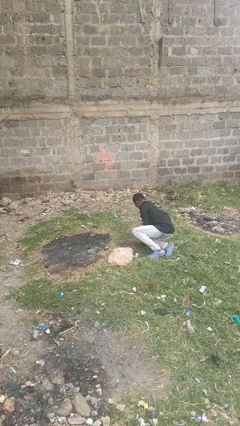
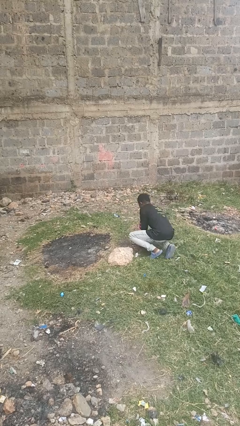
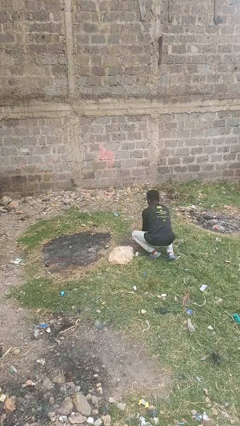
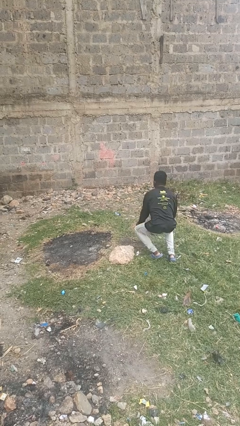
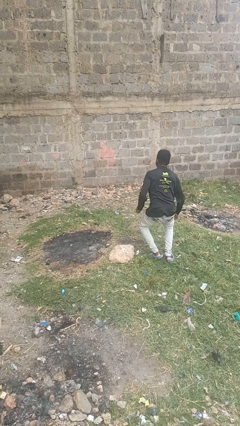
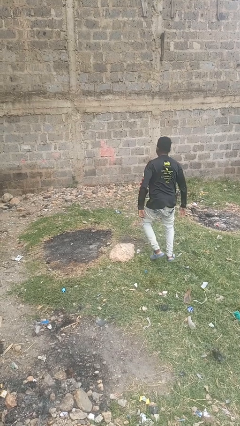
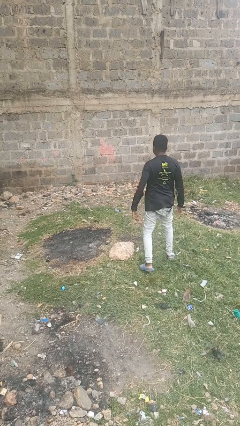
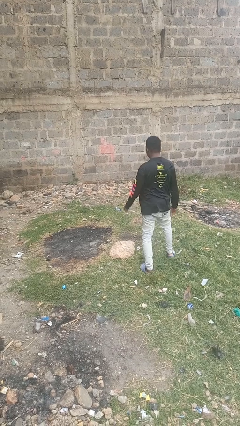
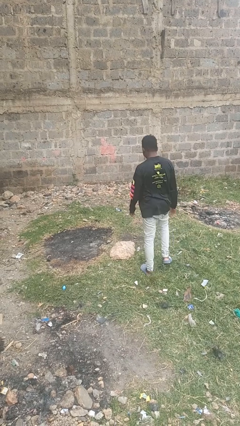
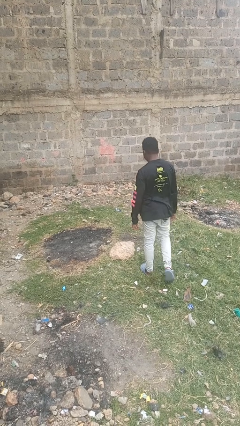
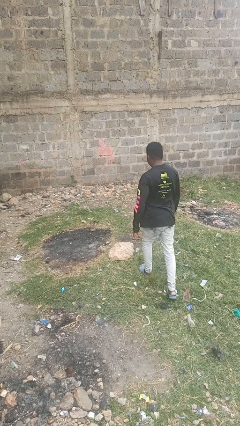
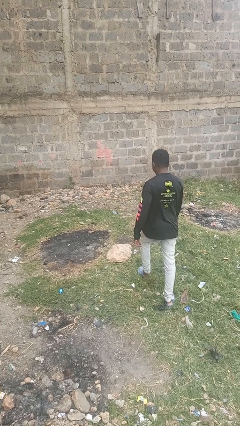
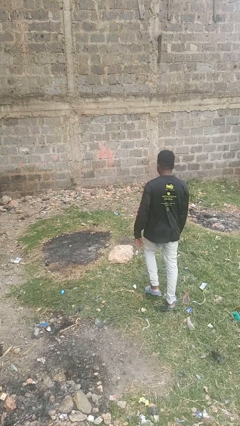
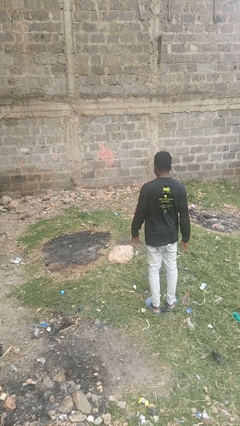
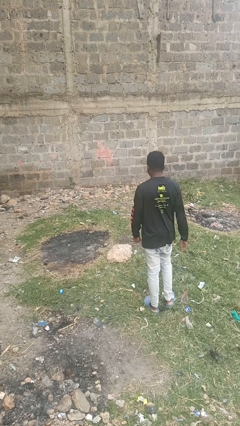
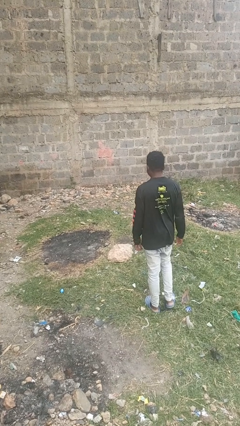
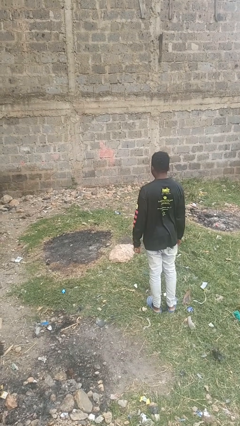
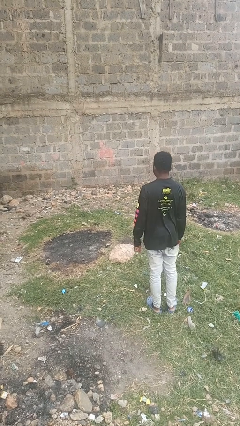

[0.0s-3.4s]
person stands up from floor

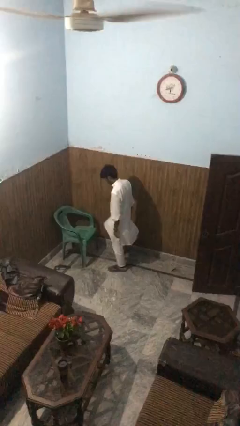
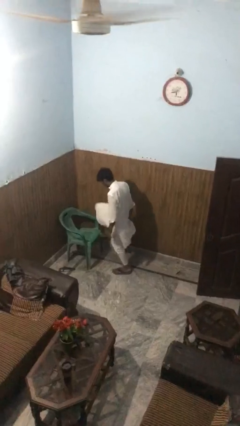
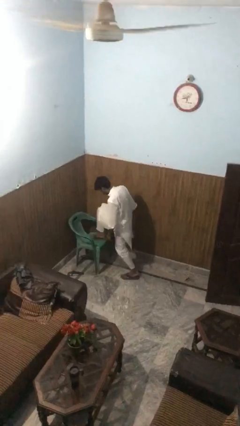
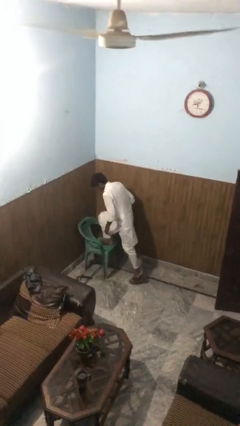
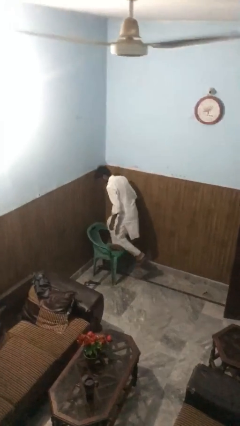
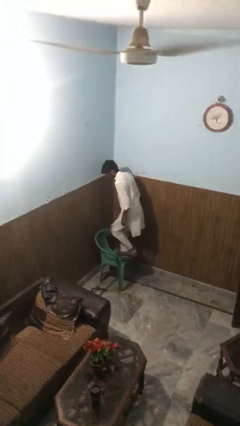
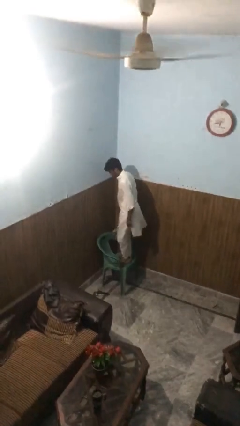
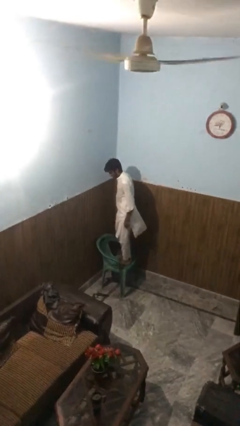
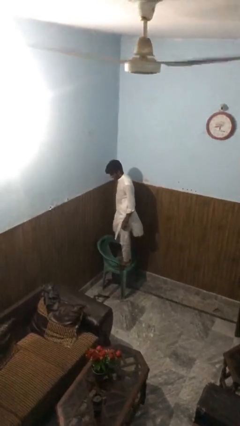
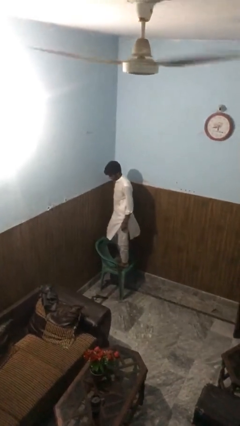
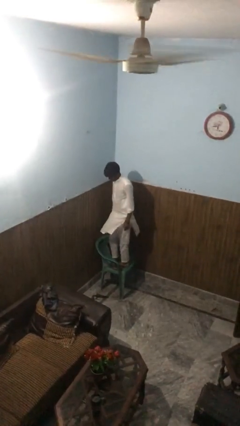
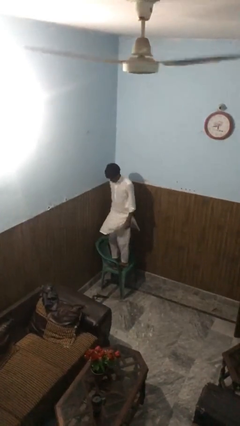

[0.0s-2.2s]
person climbs on chair

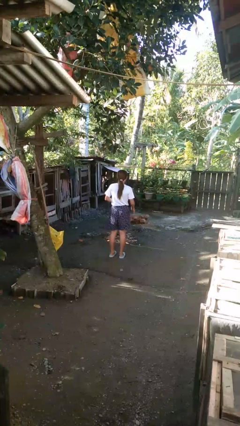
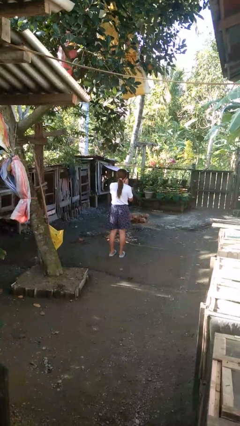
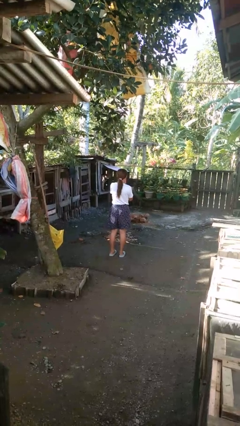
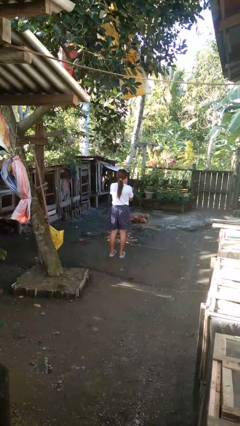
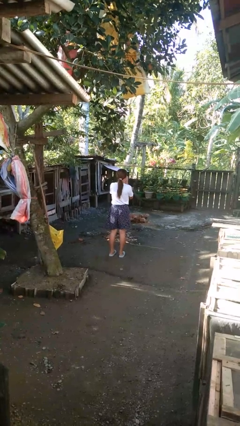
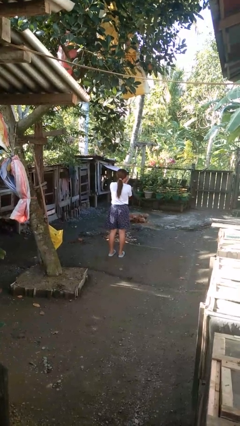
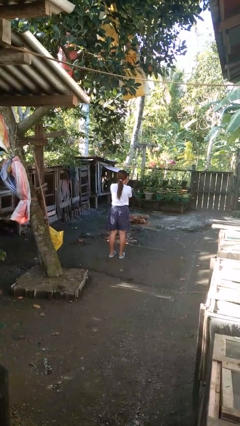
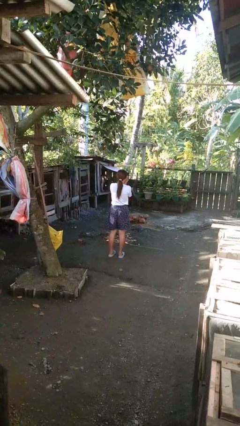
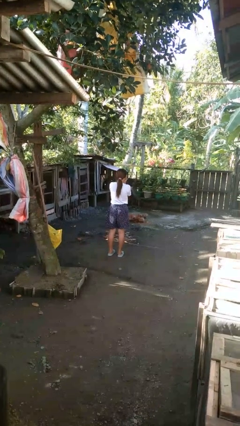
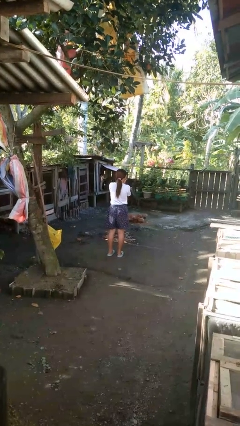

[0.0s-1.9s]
person blows into hands

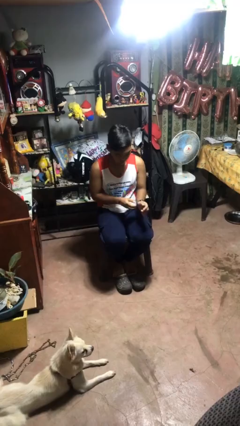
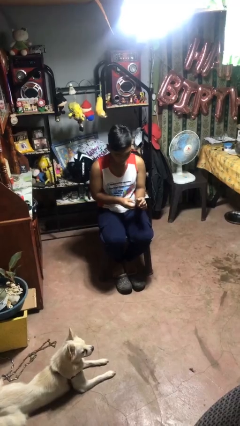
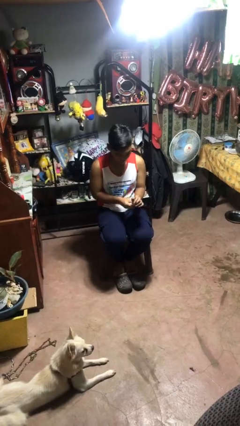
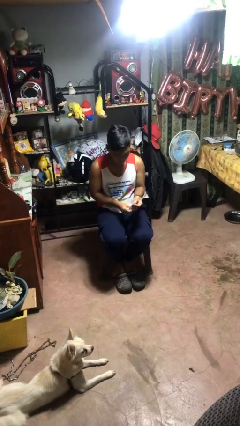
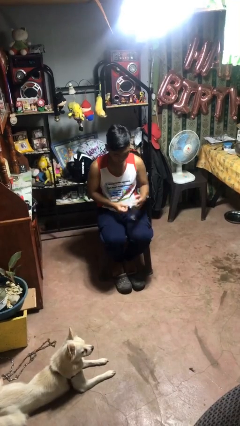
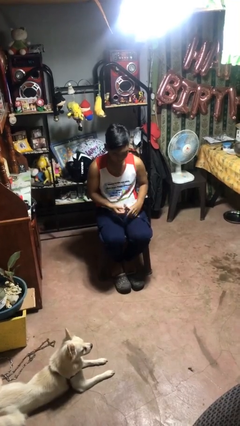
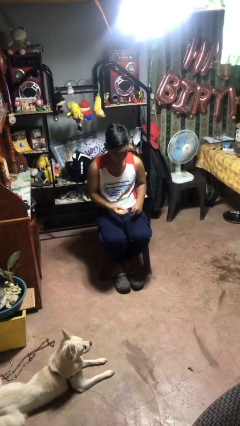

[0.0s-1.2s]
person takes off wristwatch

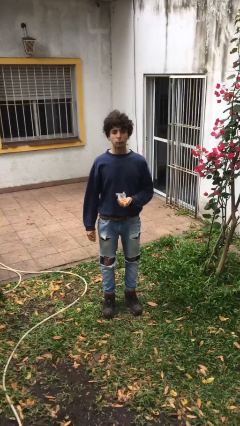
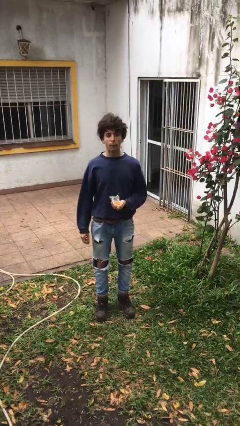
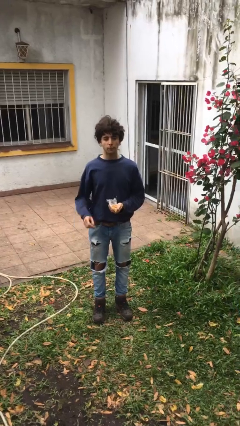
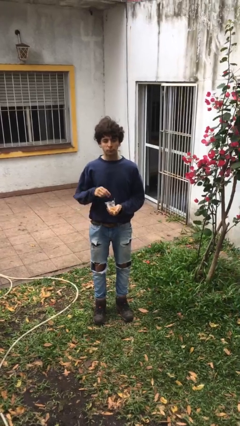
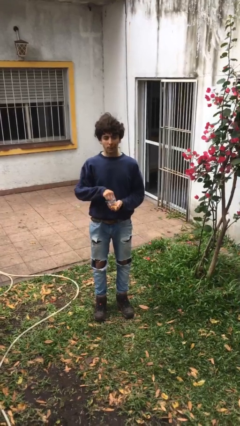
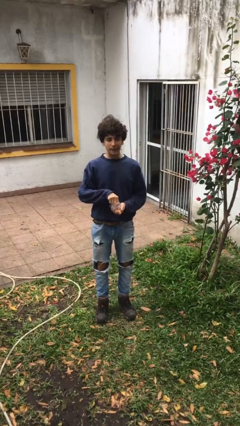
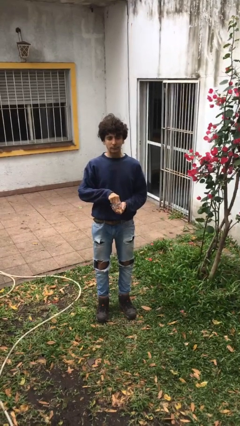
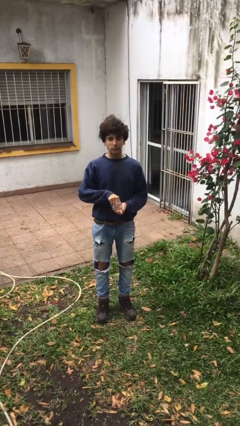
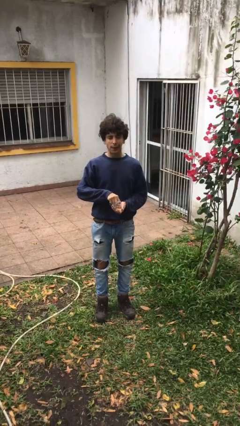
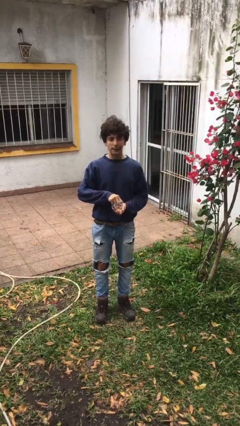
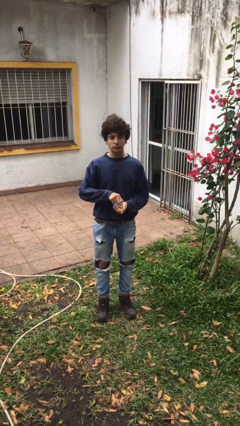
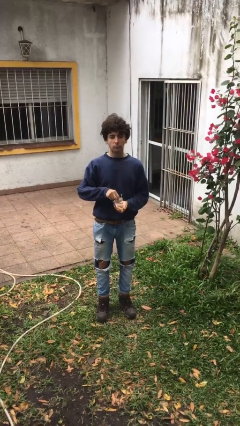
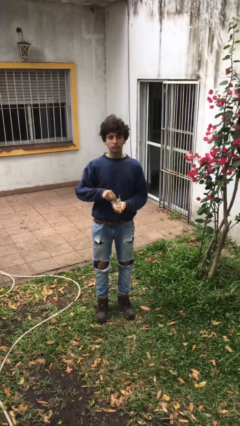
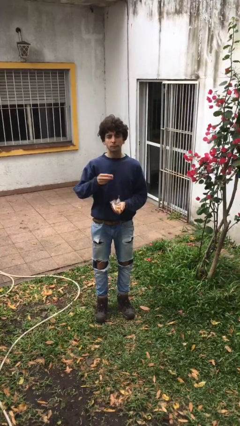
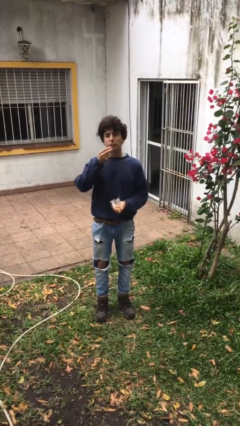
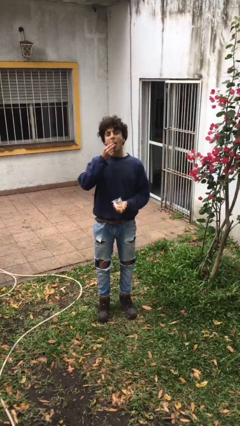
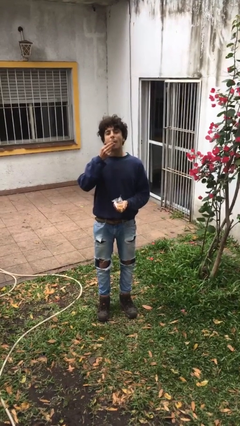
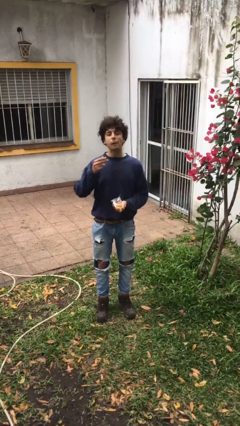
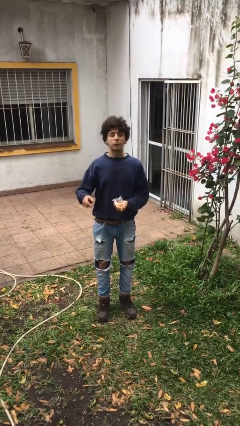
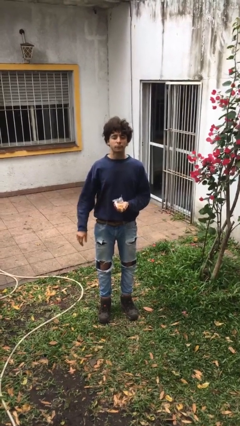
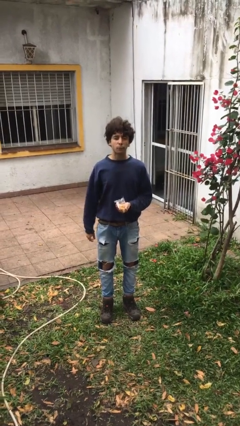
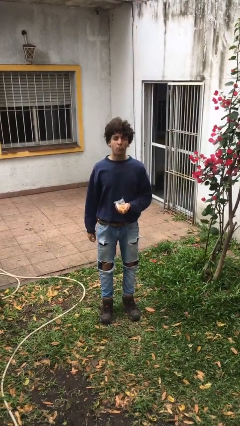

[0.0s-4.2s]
person eats snack from bag

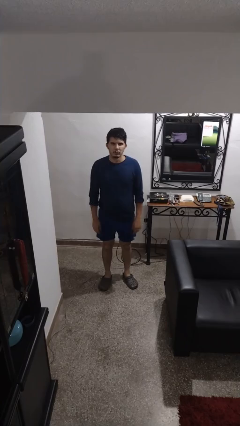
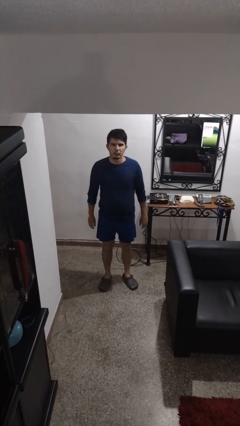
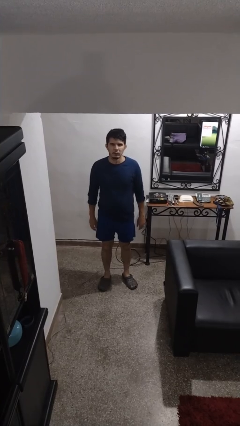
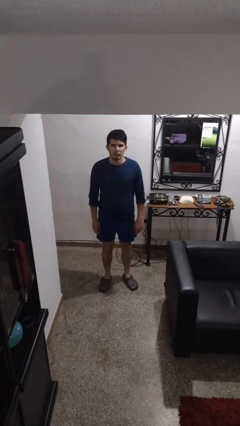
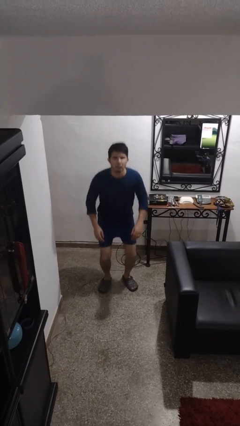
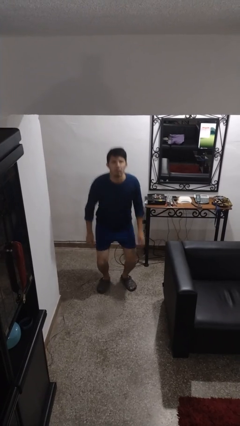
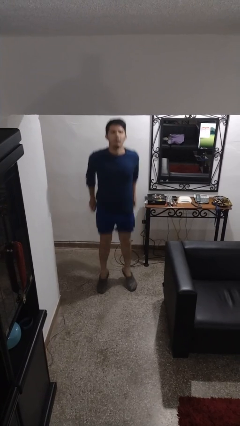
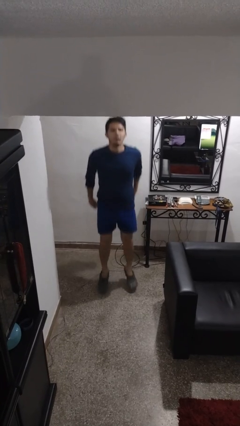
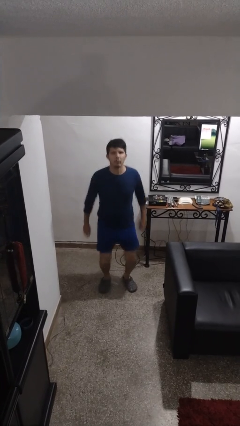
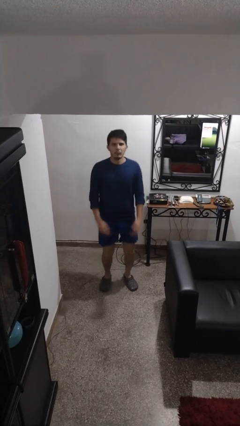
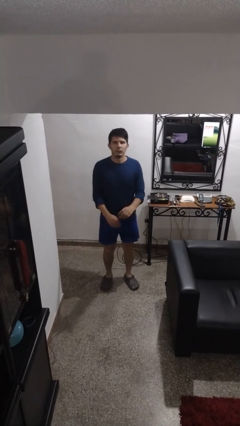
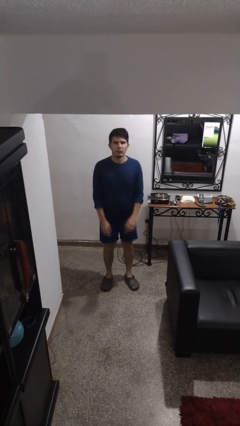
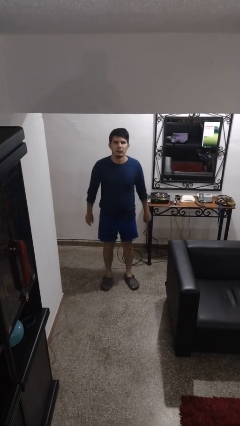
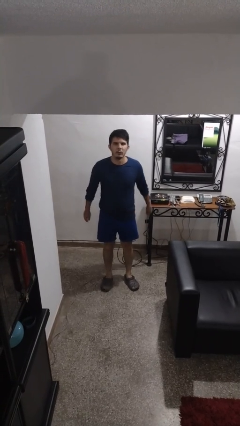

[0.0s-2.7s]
person jumps

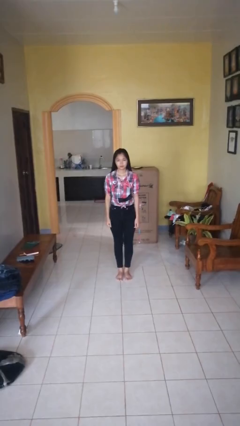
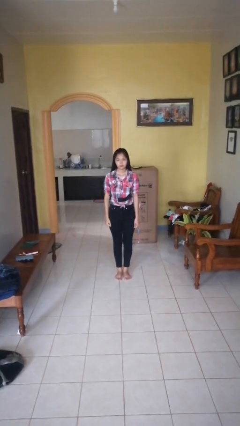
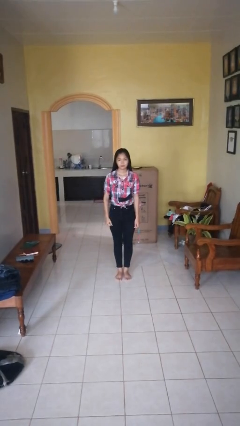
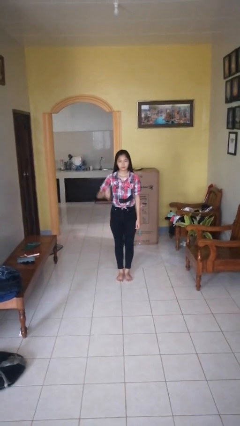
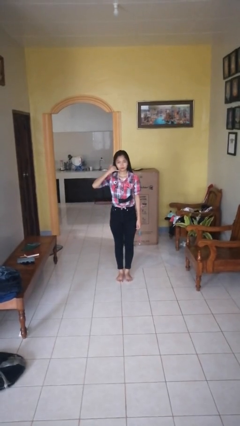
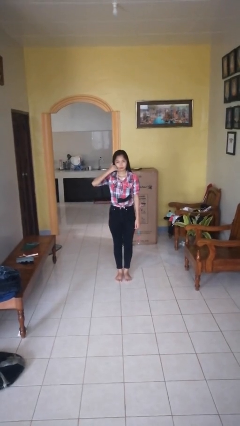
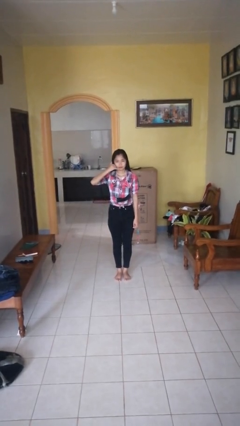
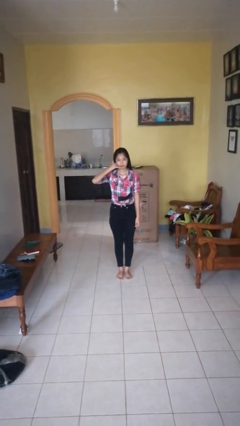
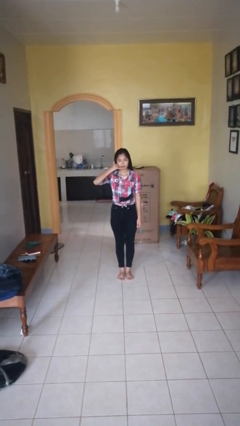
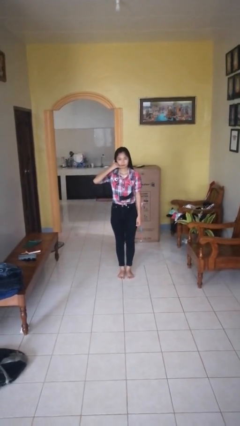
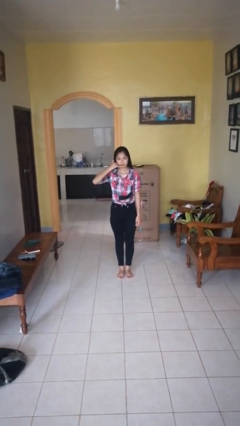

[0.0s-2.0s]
person gestures call me
